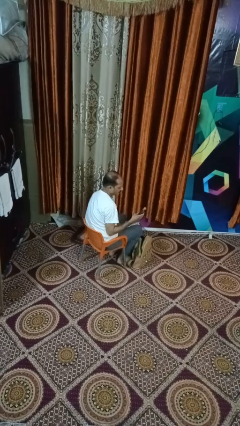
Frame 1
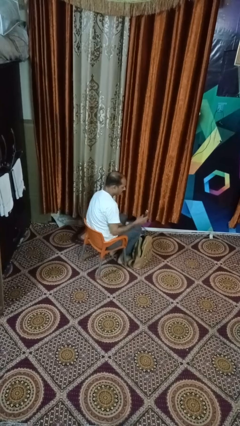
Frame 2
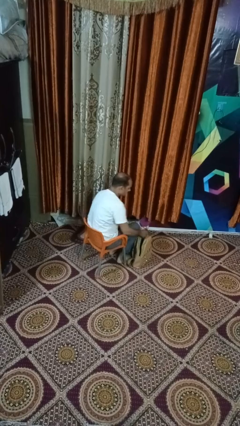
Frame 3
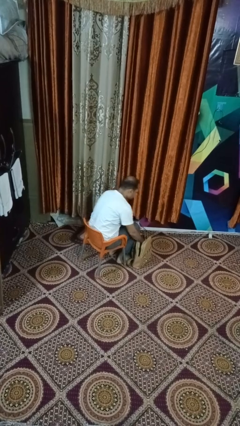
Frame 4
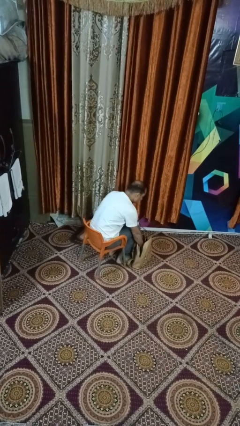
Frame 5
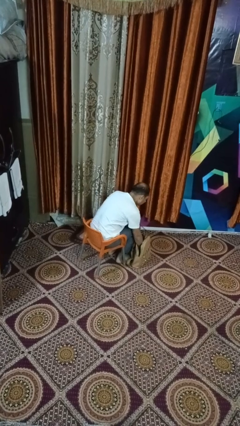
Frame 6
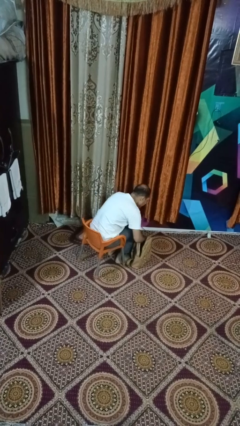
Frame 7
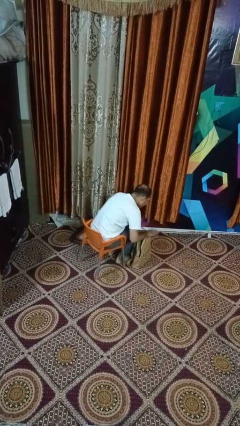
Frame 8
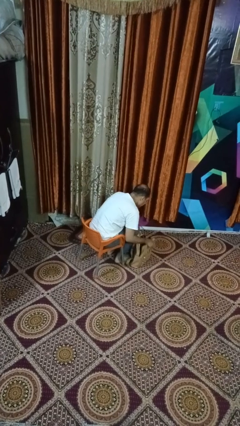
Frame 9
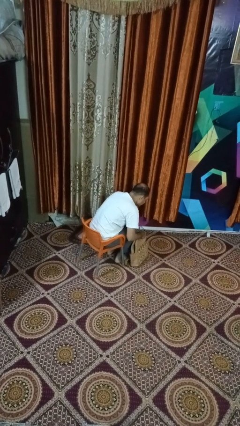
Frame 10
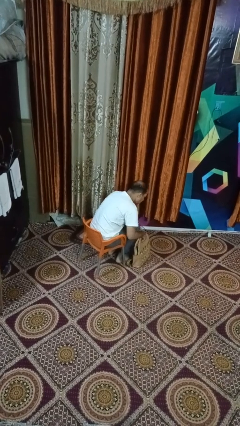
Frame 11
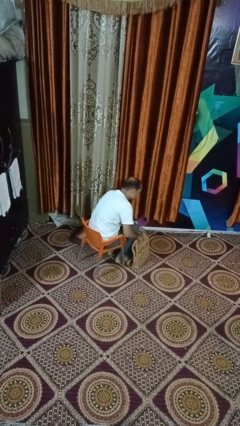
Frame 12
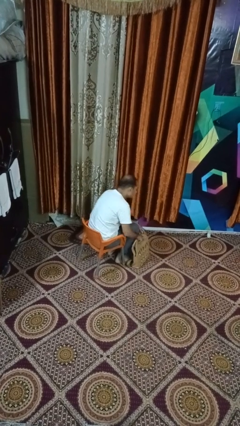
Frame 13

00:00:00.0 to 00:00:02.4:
person puts object into purse

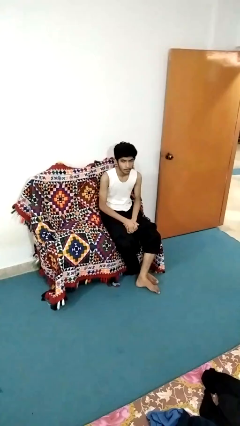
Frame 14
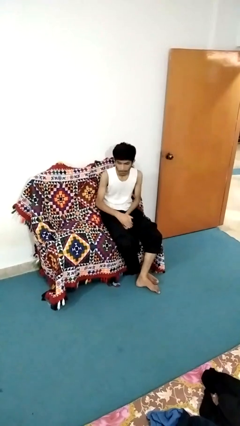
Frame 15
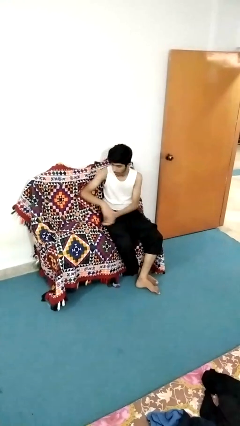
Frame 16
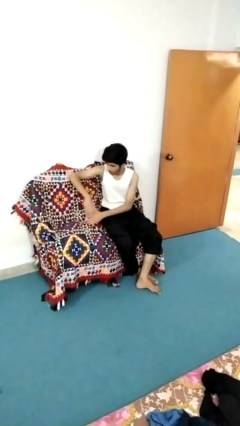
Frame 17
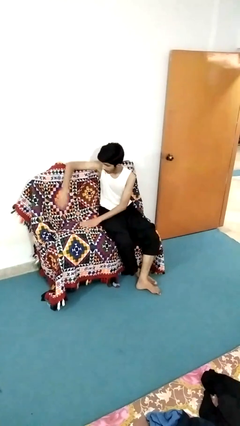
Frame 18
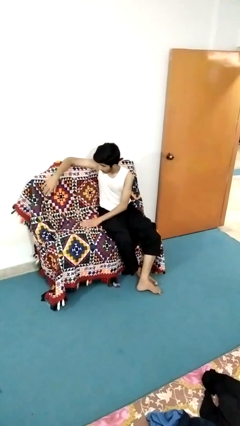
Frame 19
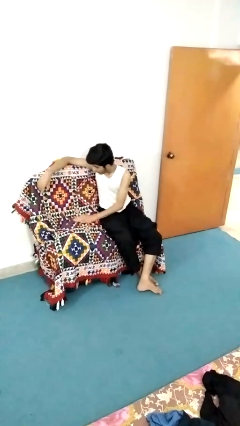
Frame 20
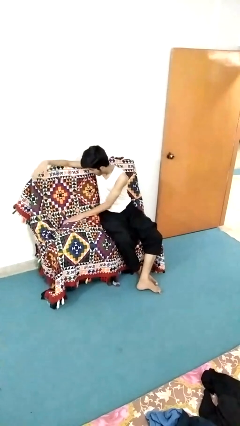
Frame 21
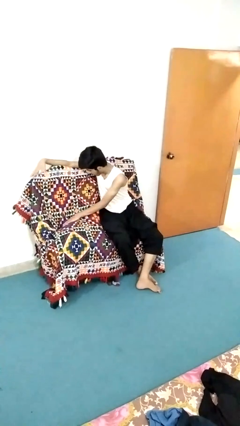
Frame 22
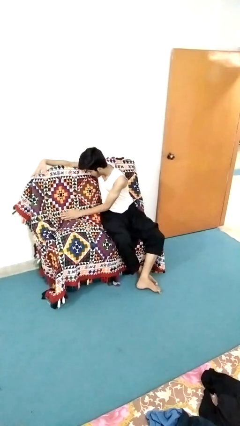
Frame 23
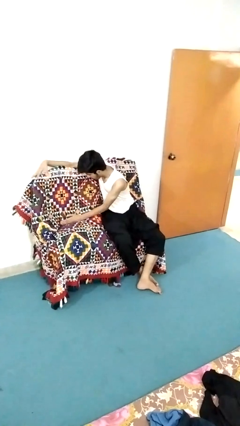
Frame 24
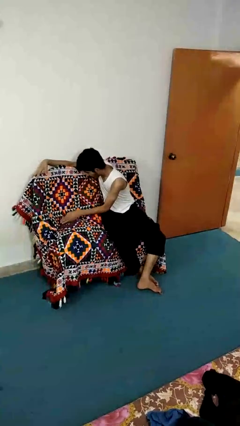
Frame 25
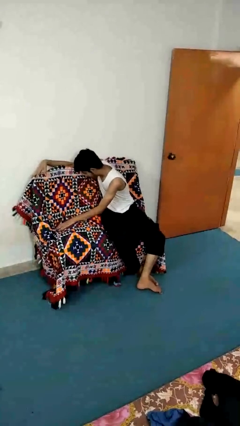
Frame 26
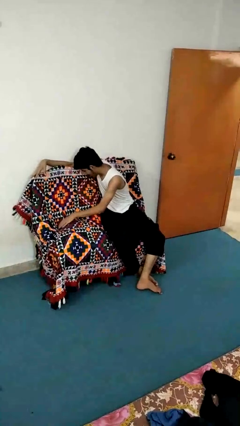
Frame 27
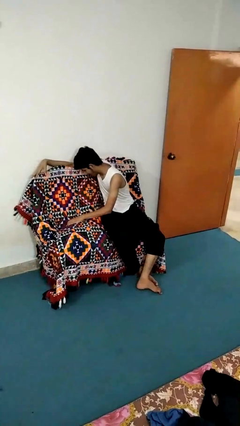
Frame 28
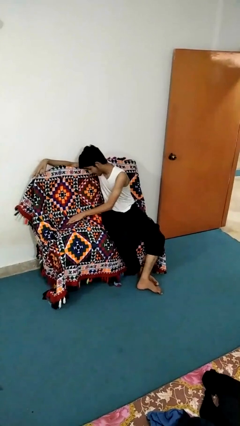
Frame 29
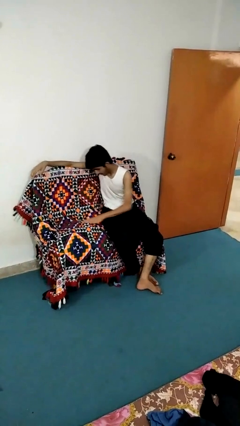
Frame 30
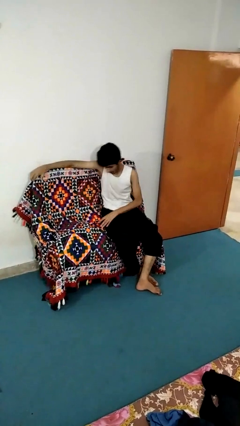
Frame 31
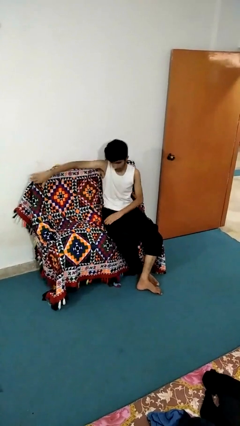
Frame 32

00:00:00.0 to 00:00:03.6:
person searches in couch

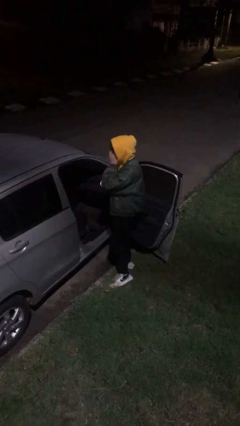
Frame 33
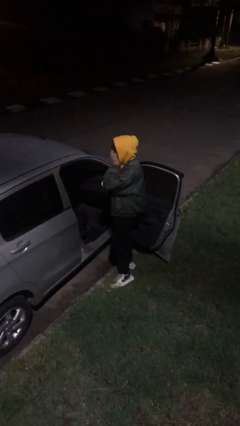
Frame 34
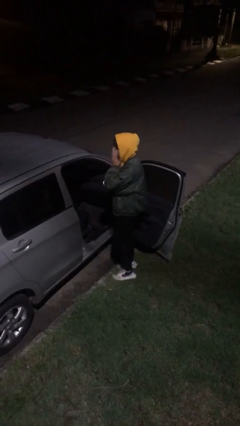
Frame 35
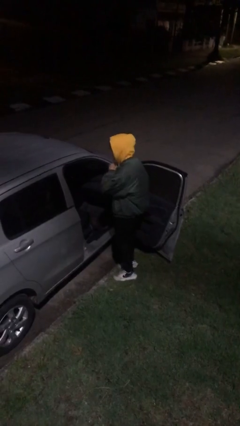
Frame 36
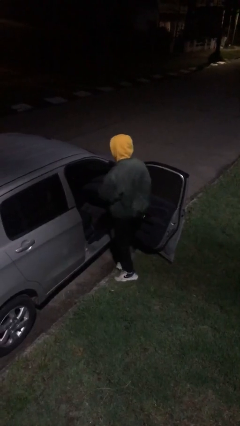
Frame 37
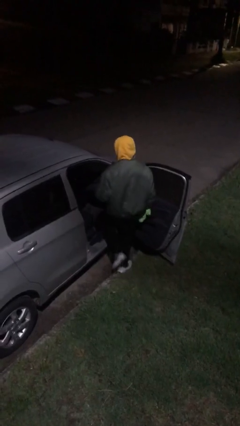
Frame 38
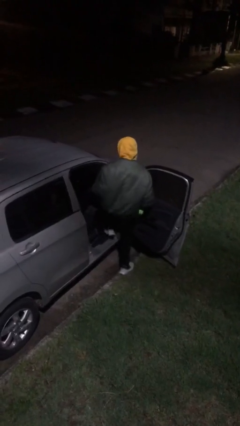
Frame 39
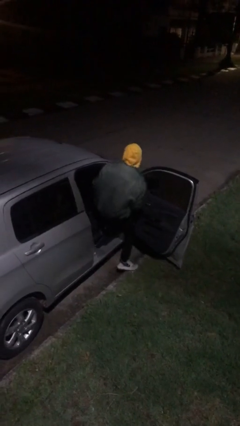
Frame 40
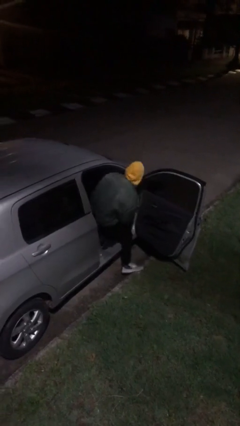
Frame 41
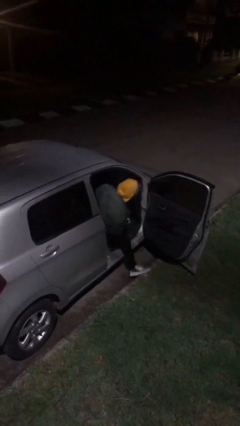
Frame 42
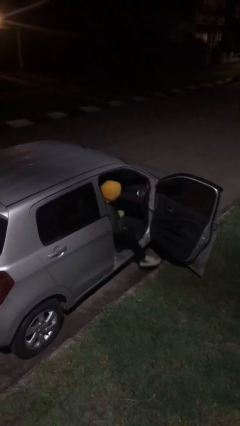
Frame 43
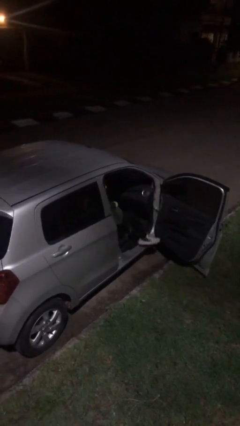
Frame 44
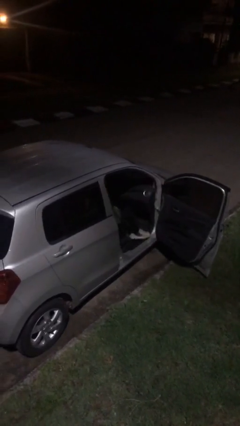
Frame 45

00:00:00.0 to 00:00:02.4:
person enters car

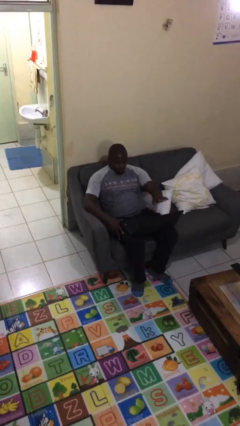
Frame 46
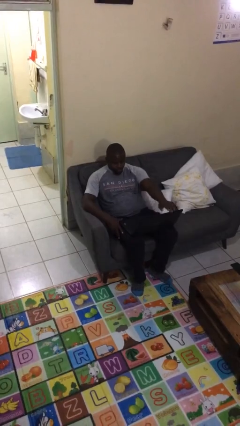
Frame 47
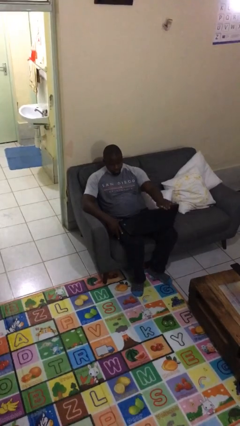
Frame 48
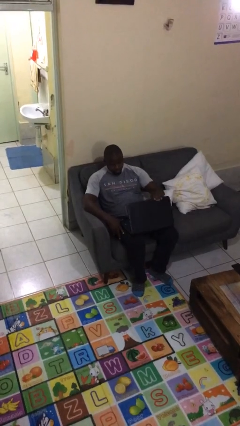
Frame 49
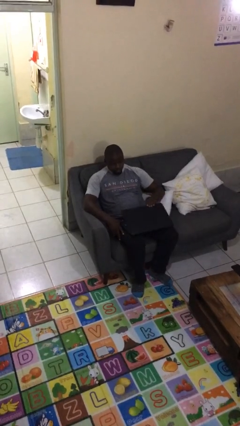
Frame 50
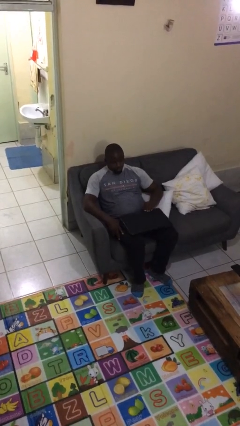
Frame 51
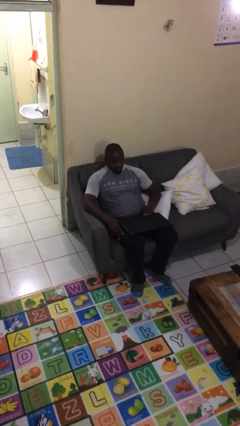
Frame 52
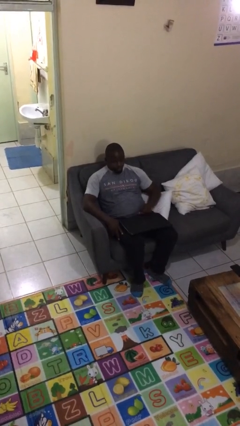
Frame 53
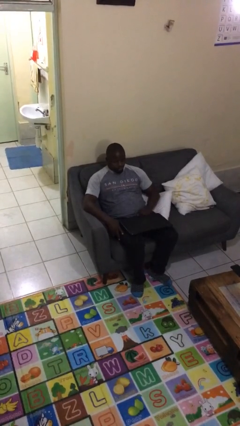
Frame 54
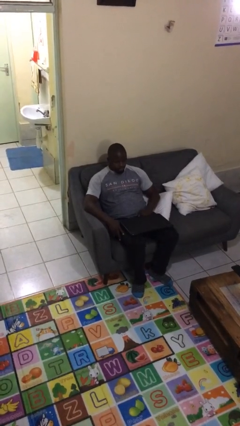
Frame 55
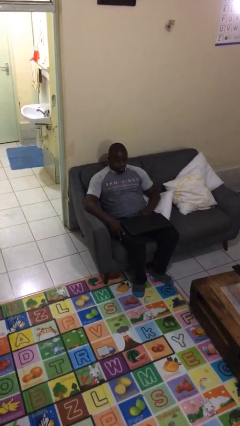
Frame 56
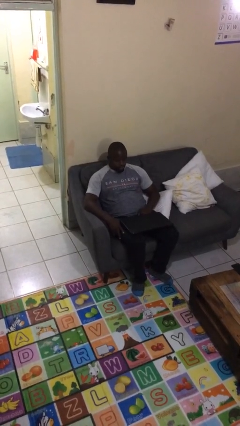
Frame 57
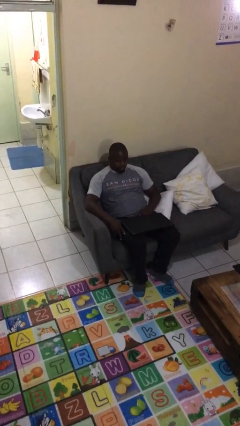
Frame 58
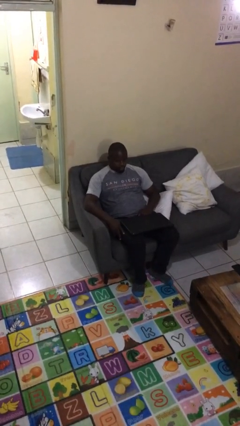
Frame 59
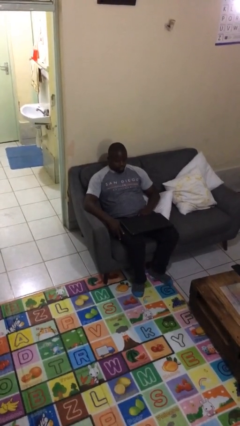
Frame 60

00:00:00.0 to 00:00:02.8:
person closes laptop

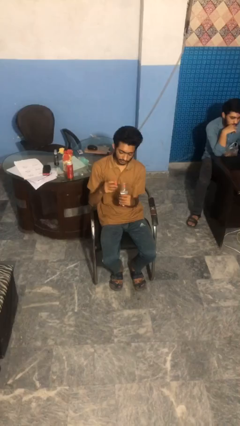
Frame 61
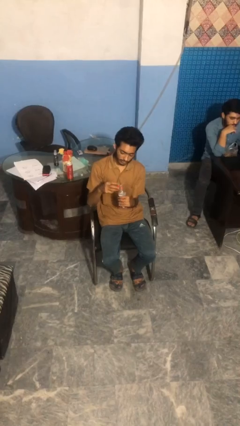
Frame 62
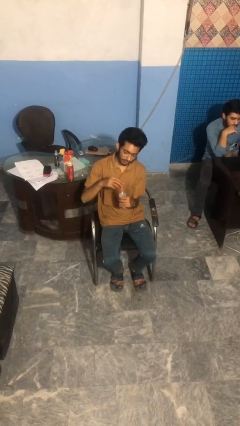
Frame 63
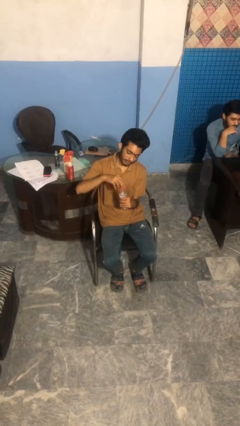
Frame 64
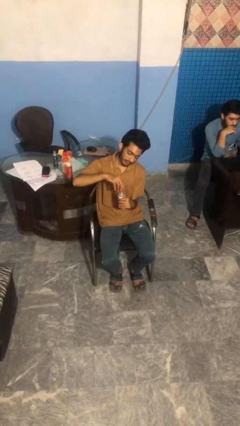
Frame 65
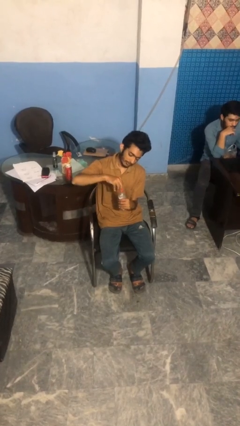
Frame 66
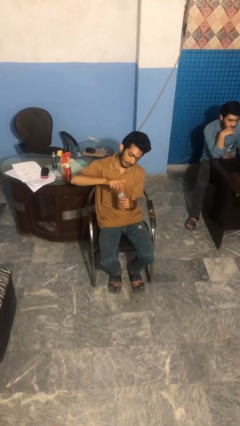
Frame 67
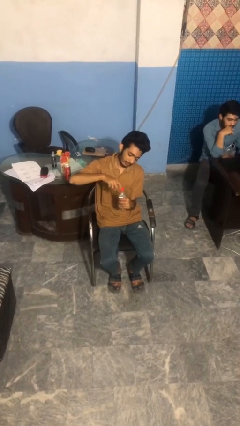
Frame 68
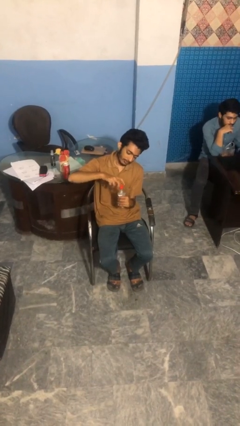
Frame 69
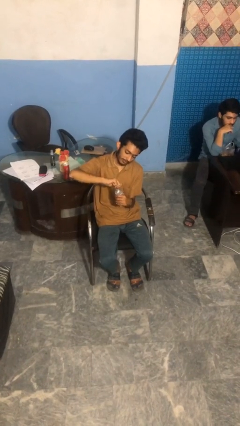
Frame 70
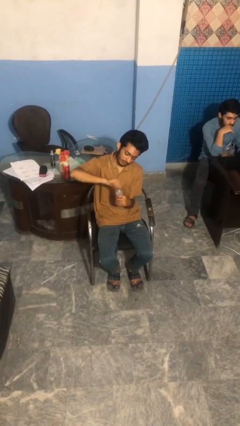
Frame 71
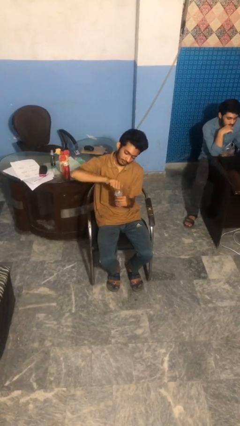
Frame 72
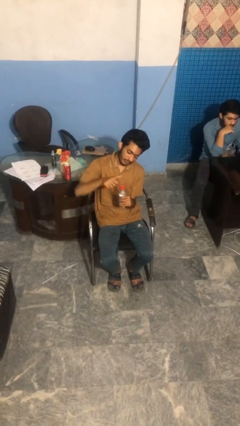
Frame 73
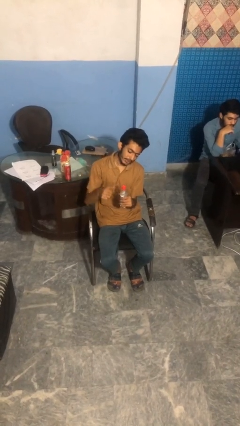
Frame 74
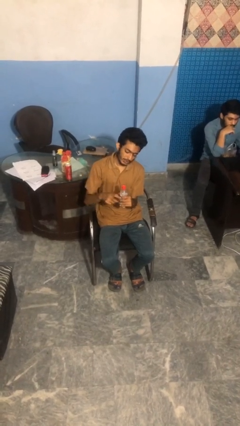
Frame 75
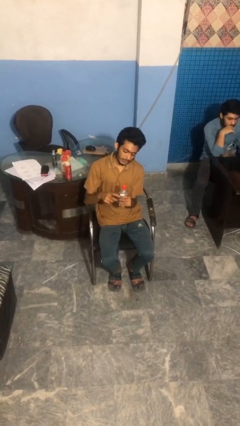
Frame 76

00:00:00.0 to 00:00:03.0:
person screws lid to bottle

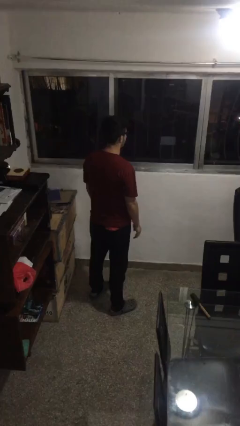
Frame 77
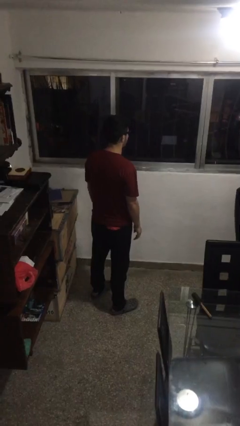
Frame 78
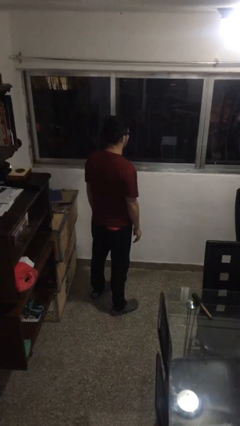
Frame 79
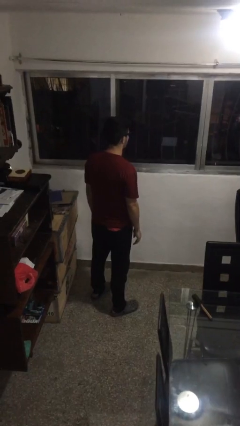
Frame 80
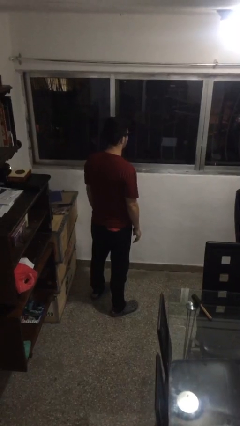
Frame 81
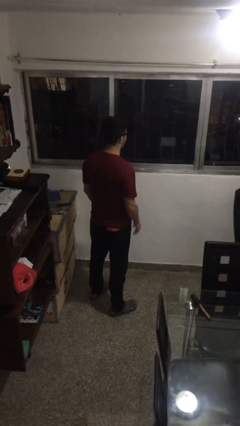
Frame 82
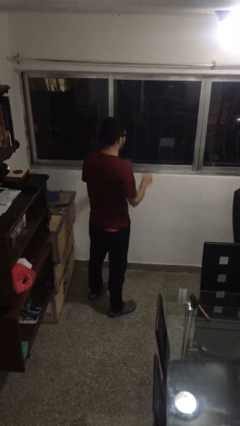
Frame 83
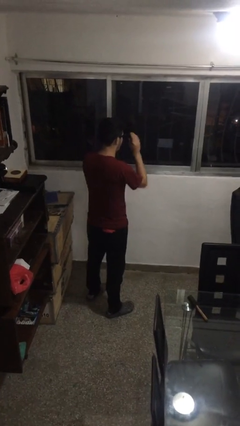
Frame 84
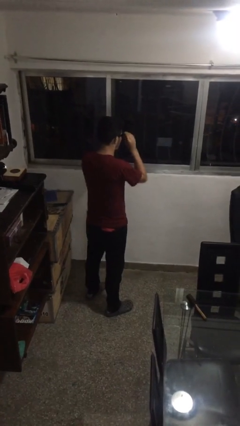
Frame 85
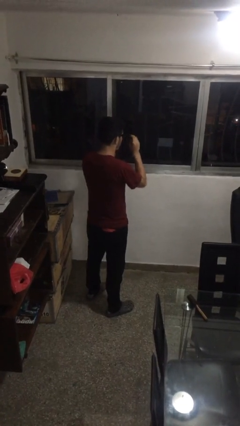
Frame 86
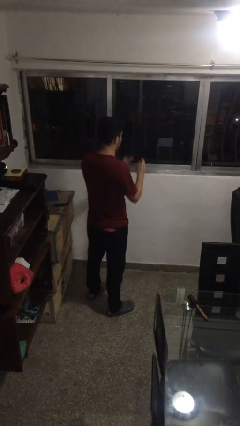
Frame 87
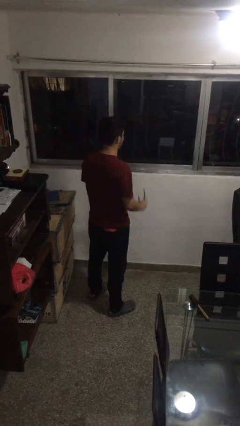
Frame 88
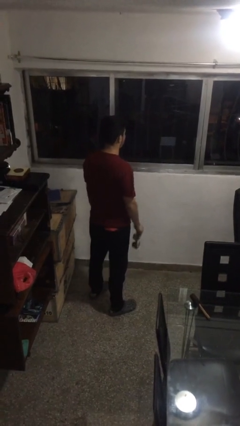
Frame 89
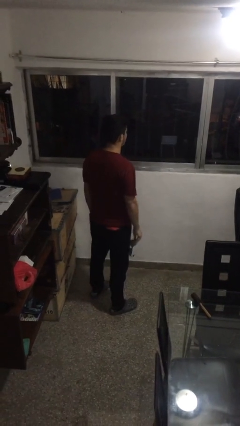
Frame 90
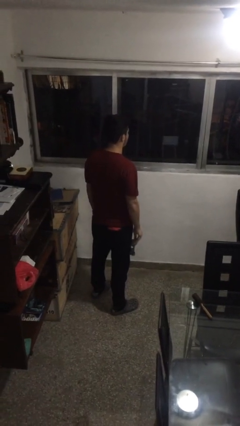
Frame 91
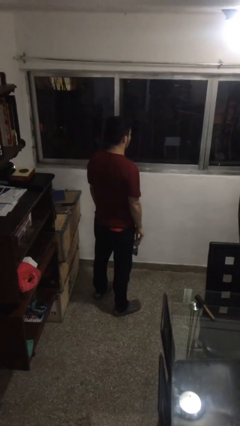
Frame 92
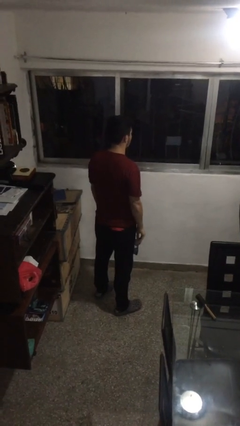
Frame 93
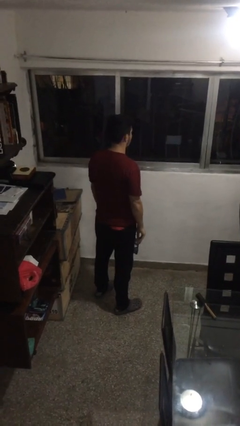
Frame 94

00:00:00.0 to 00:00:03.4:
person takes off sunglasses
